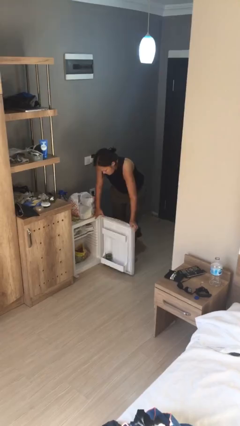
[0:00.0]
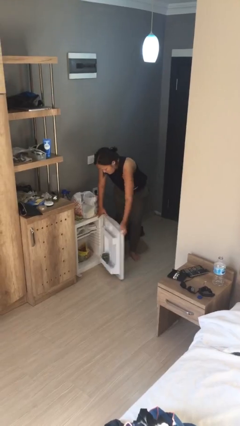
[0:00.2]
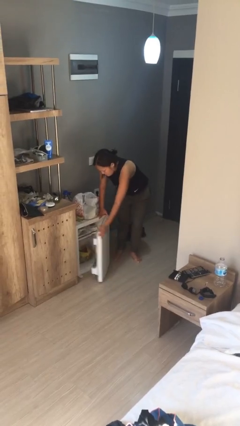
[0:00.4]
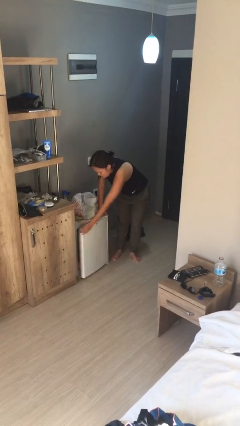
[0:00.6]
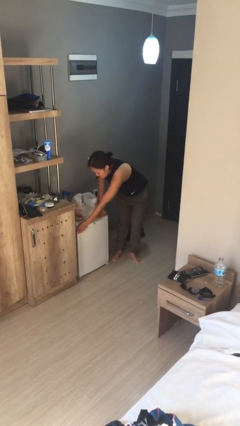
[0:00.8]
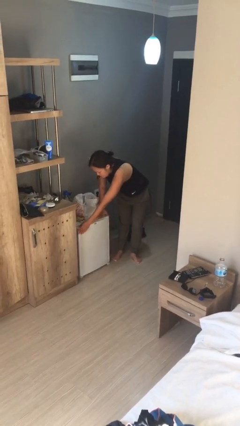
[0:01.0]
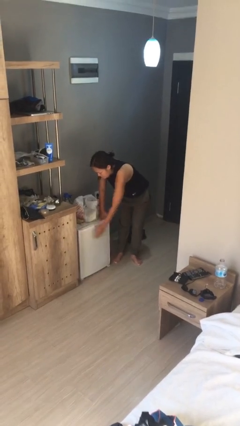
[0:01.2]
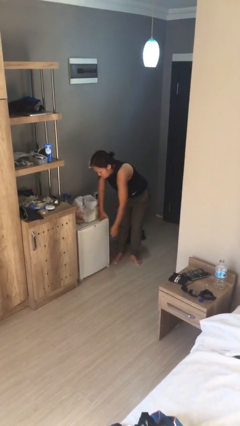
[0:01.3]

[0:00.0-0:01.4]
person closes refrigerator

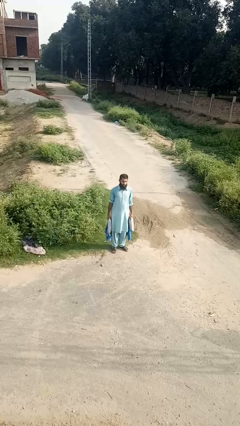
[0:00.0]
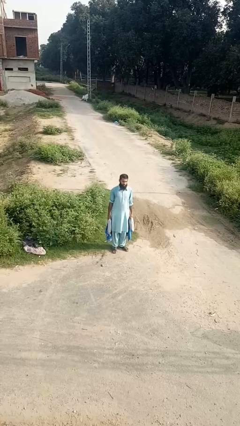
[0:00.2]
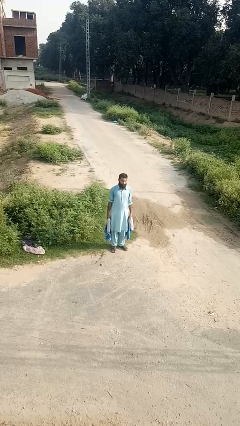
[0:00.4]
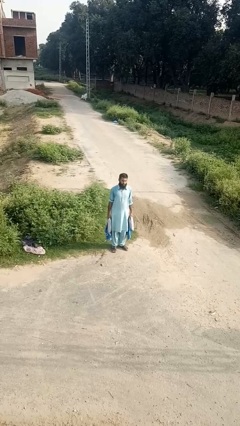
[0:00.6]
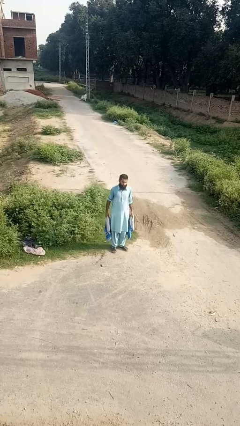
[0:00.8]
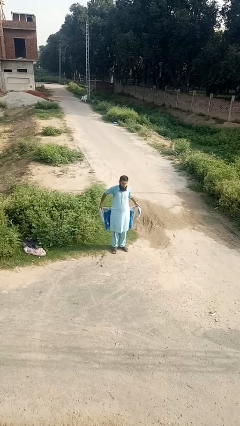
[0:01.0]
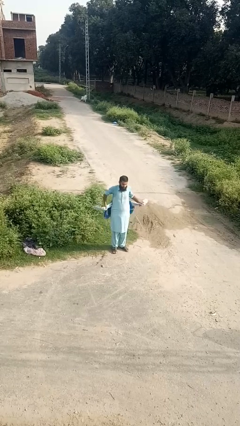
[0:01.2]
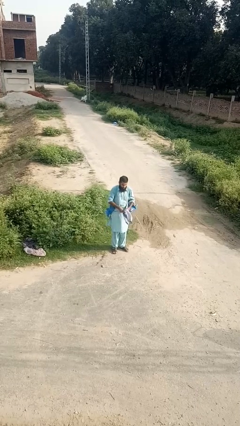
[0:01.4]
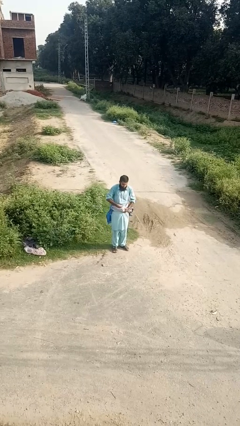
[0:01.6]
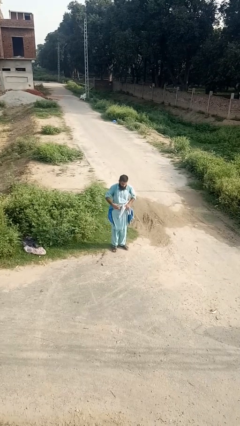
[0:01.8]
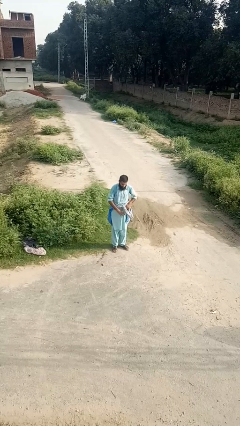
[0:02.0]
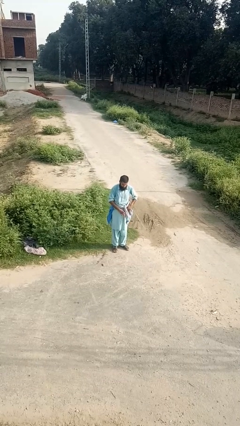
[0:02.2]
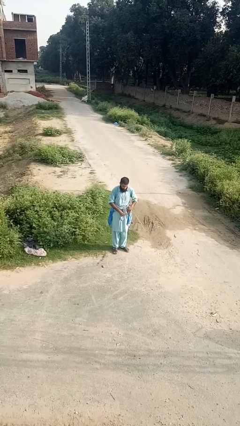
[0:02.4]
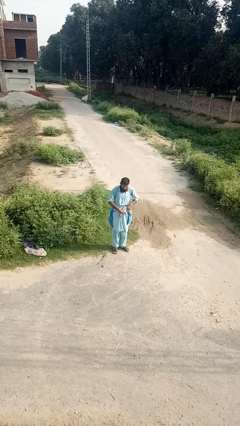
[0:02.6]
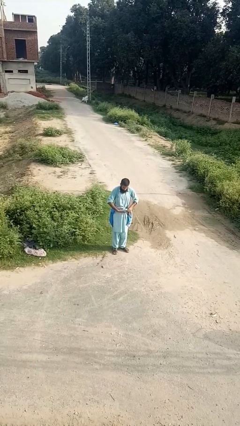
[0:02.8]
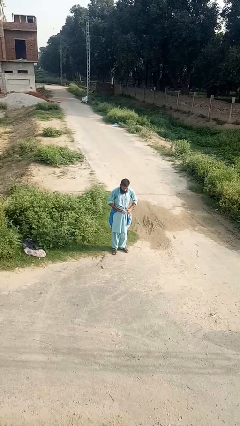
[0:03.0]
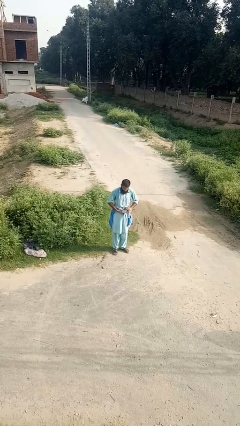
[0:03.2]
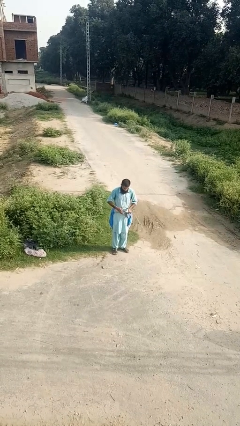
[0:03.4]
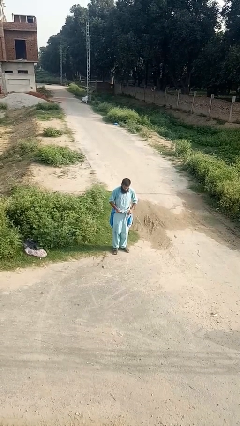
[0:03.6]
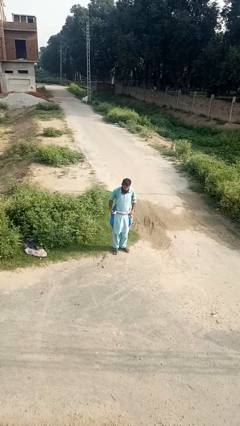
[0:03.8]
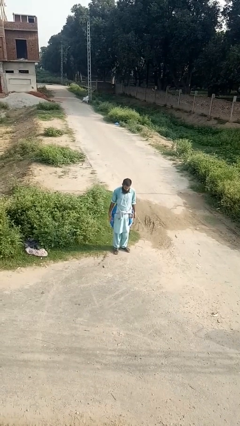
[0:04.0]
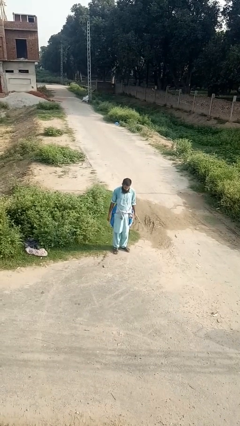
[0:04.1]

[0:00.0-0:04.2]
person ties jacket around waist

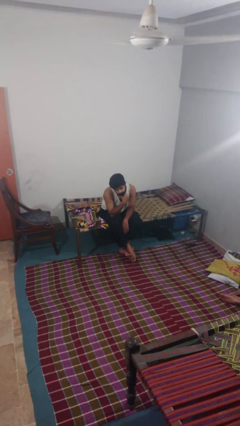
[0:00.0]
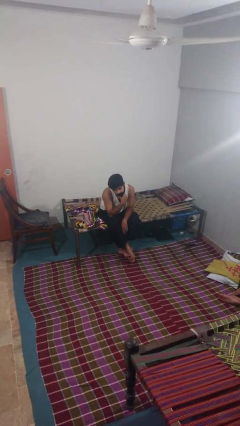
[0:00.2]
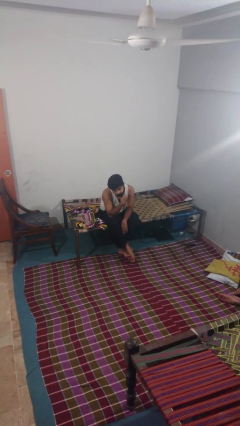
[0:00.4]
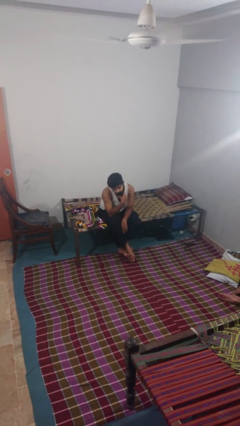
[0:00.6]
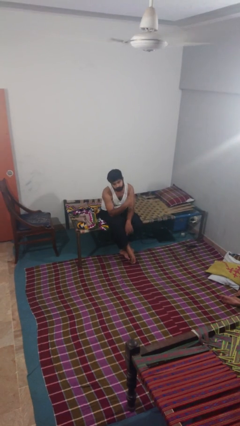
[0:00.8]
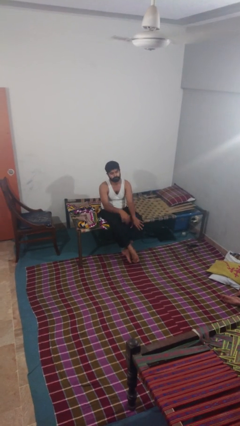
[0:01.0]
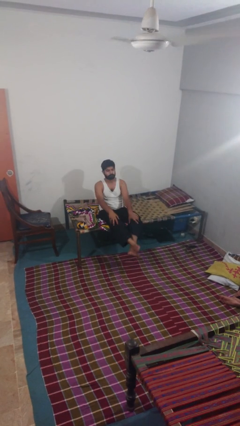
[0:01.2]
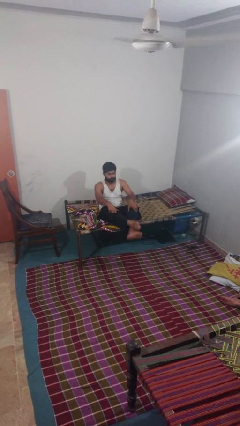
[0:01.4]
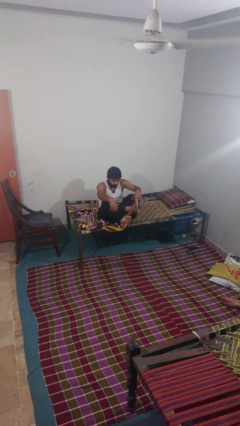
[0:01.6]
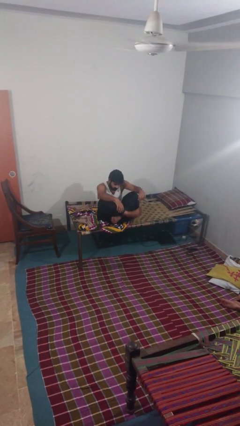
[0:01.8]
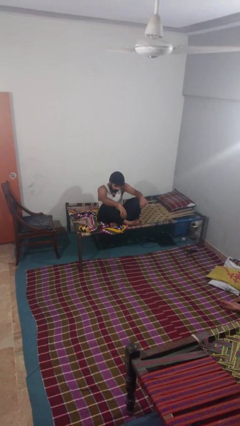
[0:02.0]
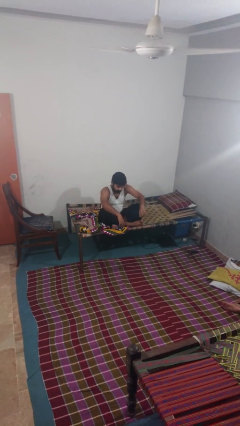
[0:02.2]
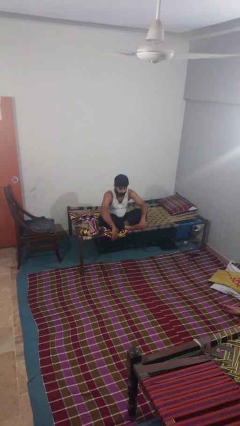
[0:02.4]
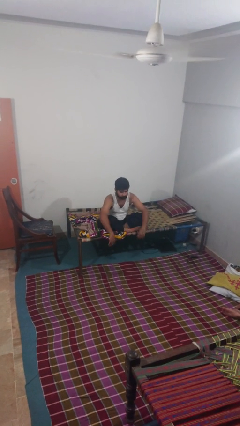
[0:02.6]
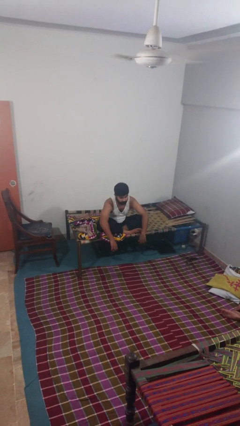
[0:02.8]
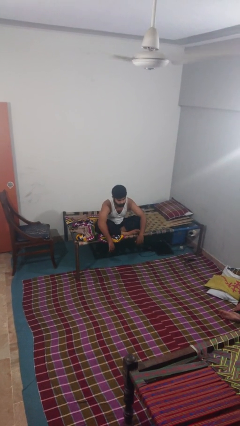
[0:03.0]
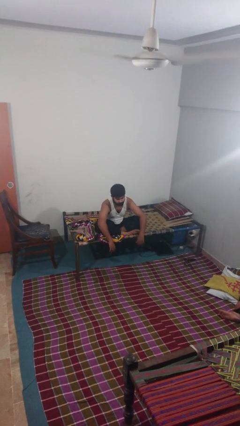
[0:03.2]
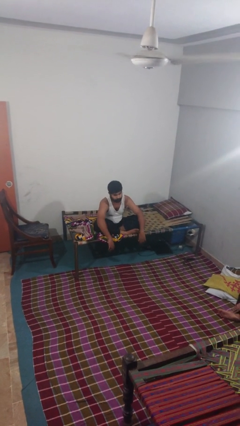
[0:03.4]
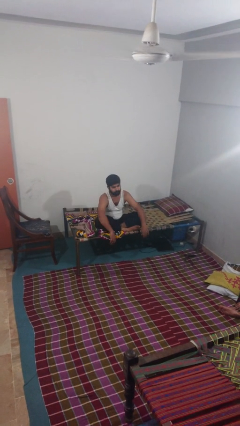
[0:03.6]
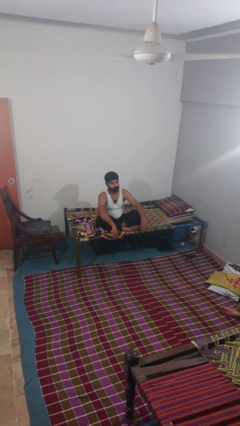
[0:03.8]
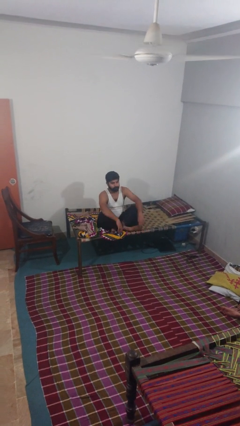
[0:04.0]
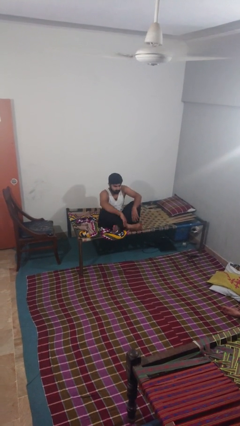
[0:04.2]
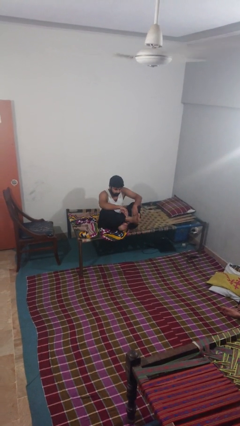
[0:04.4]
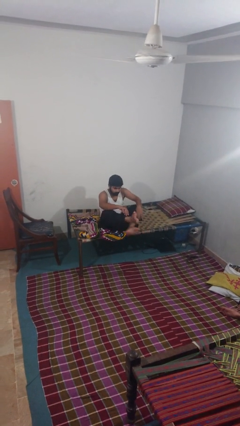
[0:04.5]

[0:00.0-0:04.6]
person crosses legs

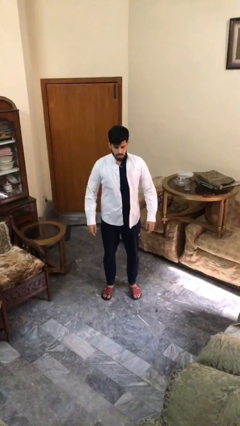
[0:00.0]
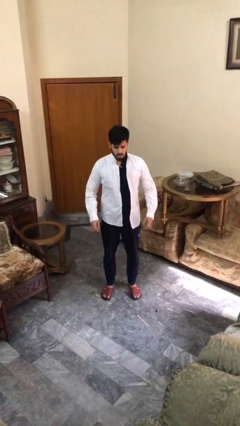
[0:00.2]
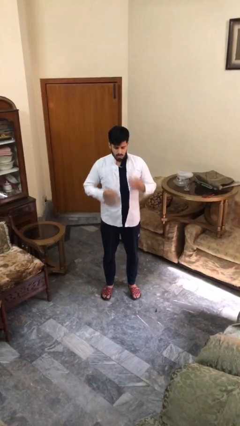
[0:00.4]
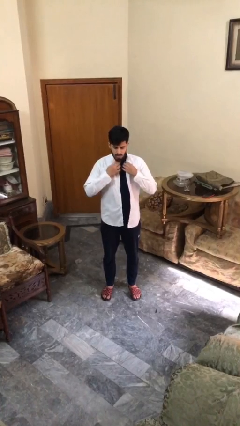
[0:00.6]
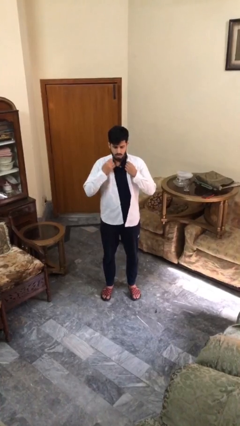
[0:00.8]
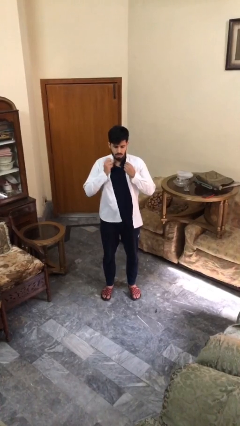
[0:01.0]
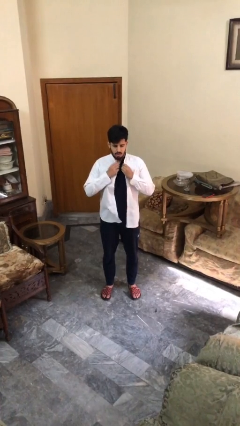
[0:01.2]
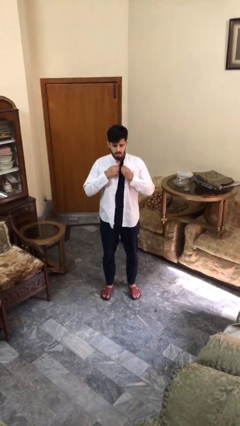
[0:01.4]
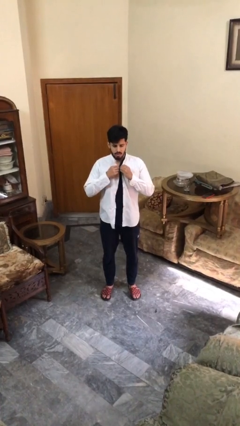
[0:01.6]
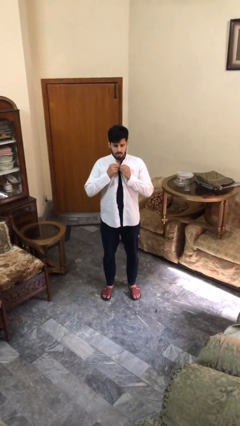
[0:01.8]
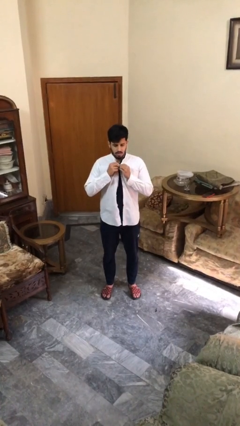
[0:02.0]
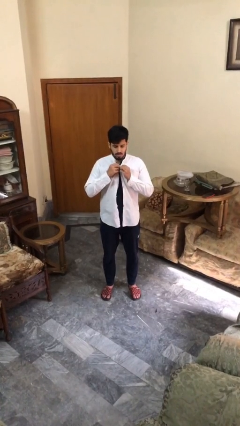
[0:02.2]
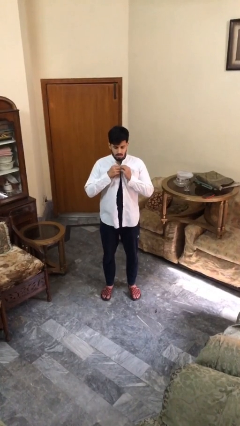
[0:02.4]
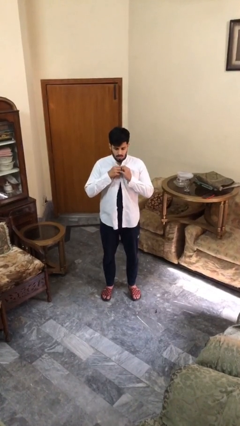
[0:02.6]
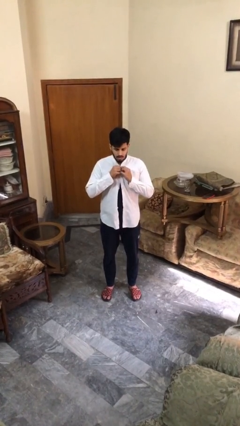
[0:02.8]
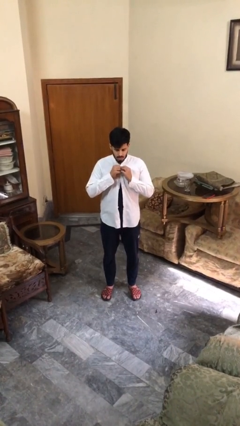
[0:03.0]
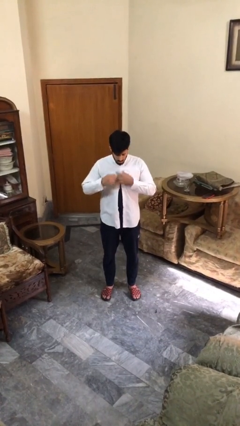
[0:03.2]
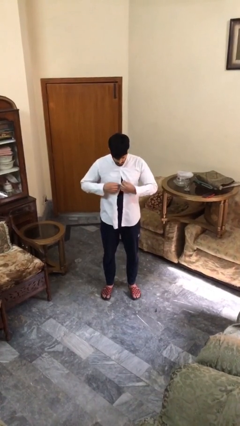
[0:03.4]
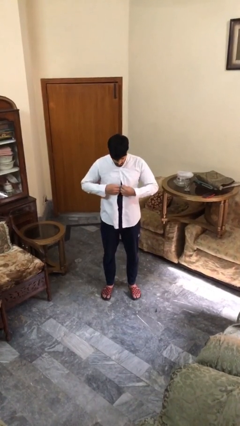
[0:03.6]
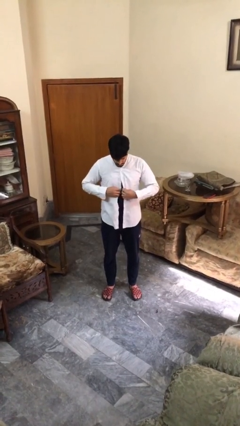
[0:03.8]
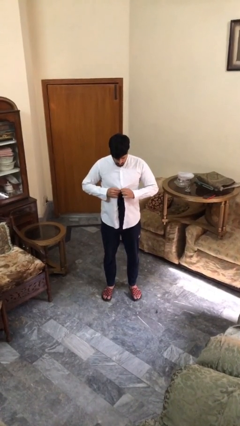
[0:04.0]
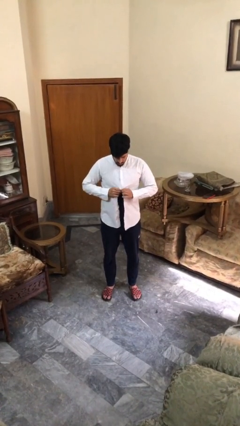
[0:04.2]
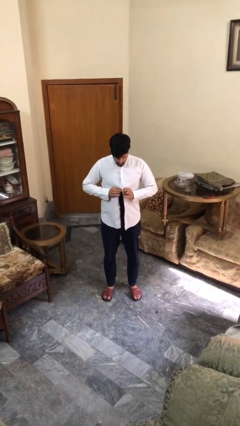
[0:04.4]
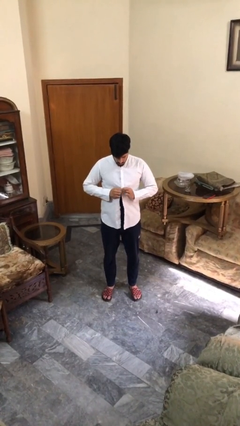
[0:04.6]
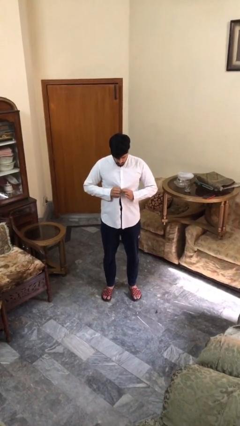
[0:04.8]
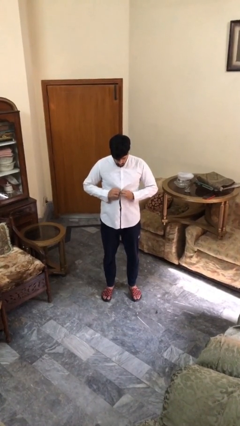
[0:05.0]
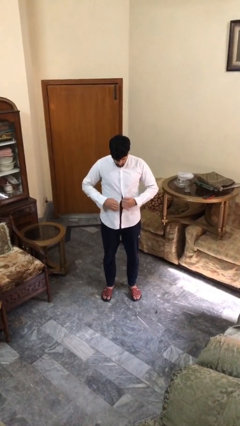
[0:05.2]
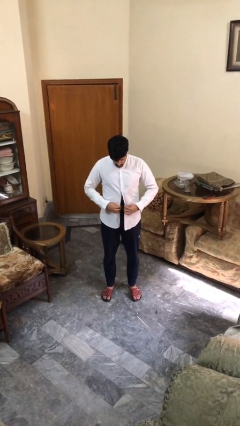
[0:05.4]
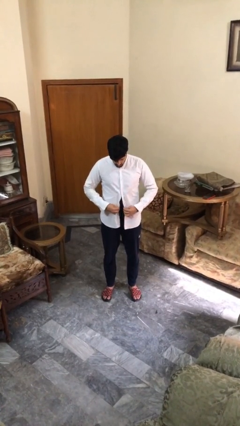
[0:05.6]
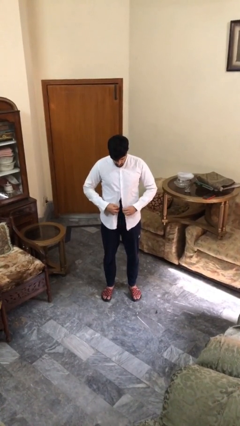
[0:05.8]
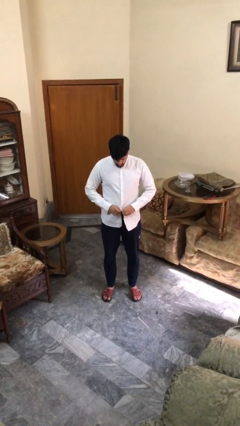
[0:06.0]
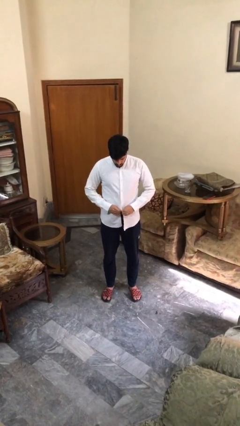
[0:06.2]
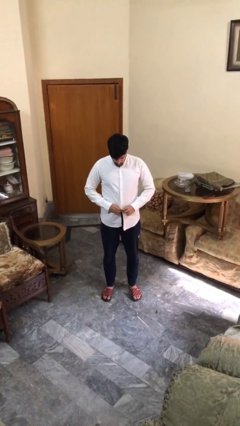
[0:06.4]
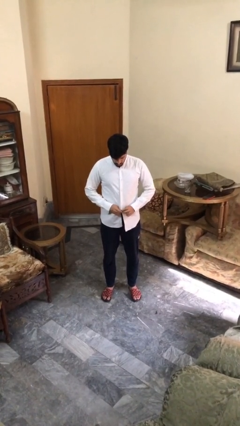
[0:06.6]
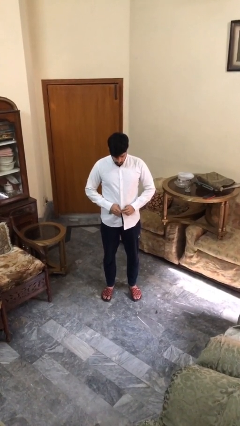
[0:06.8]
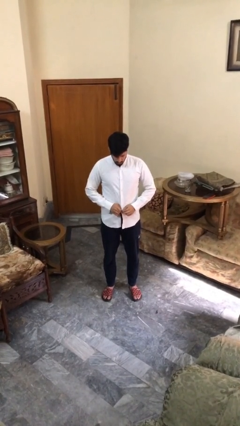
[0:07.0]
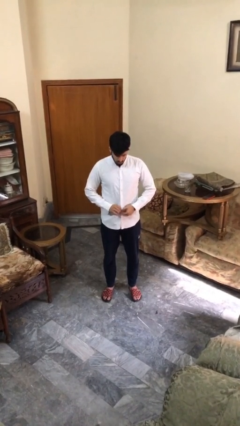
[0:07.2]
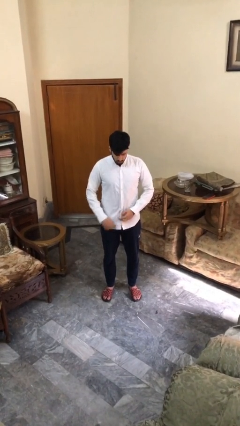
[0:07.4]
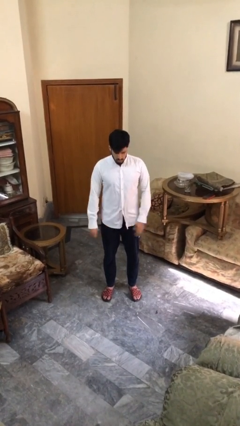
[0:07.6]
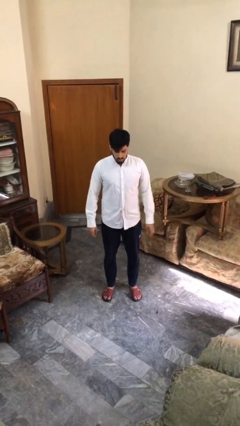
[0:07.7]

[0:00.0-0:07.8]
person buttons shirt
